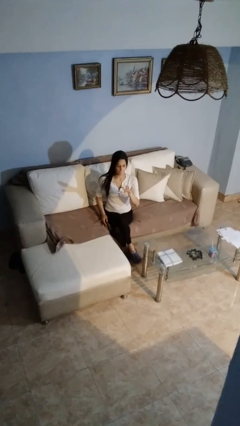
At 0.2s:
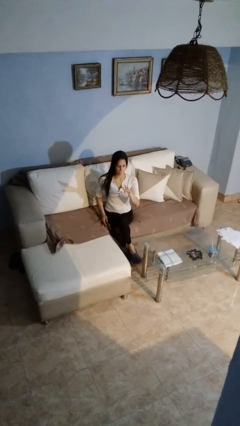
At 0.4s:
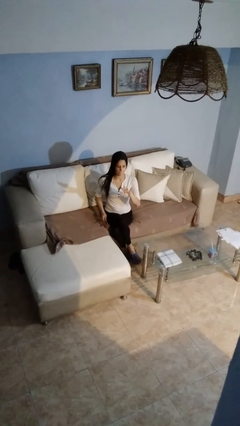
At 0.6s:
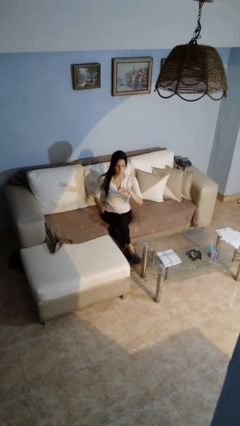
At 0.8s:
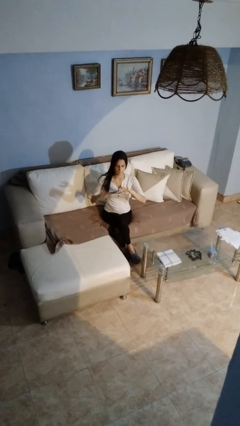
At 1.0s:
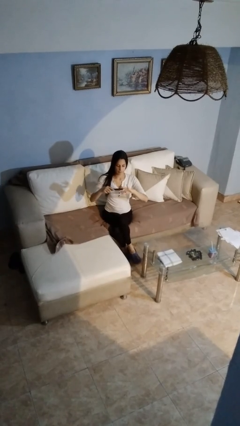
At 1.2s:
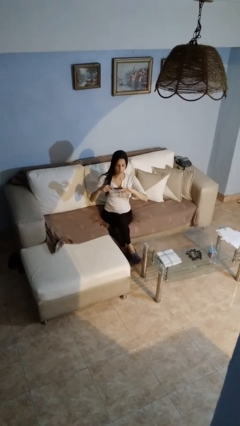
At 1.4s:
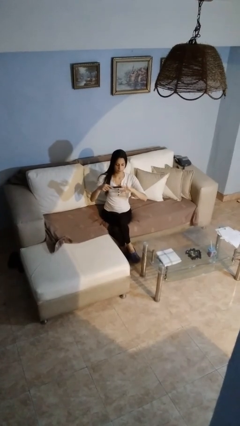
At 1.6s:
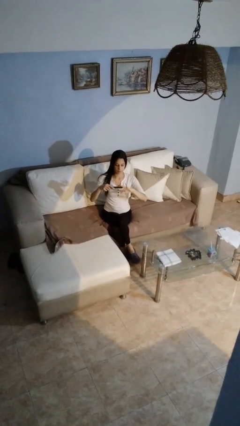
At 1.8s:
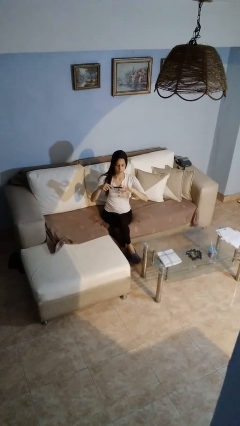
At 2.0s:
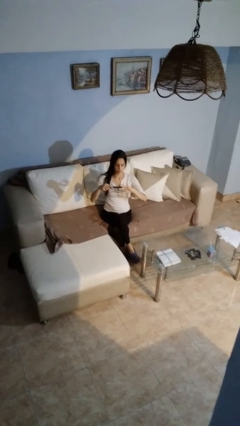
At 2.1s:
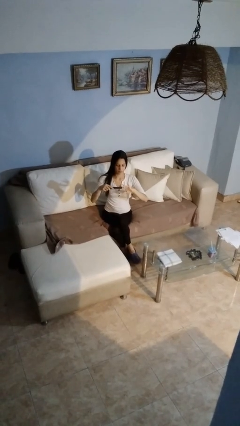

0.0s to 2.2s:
person files fingernails

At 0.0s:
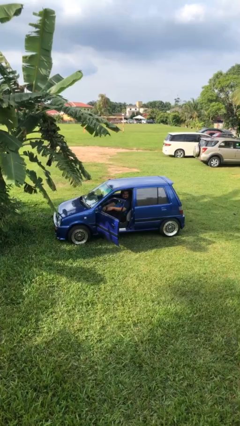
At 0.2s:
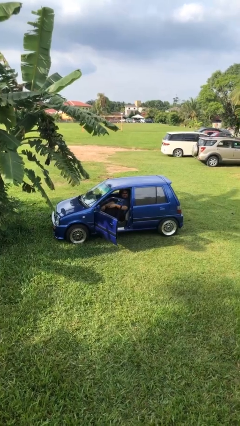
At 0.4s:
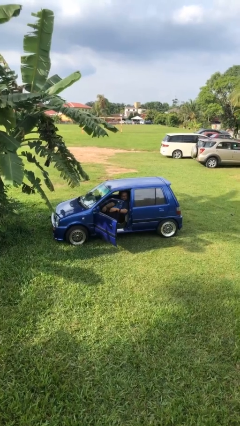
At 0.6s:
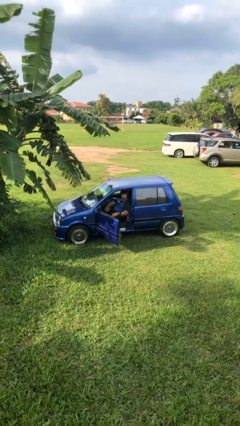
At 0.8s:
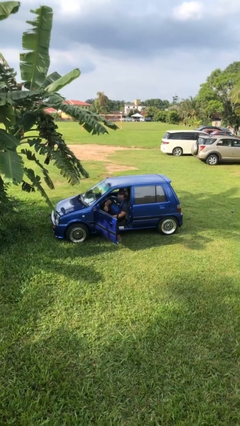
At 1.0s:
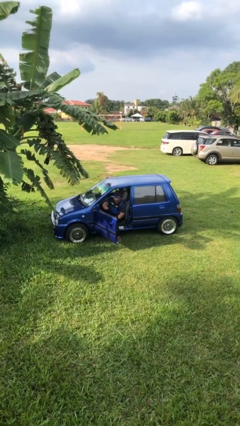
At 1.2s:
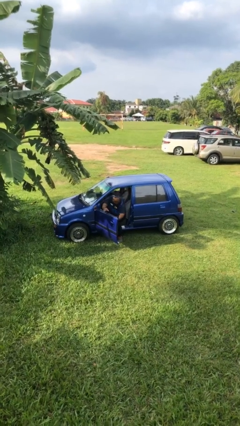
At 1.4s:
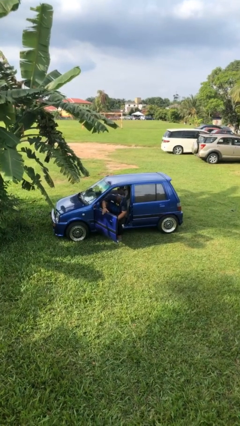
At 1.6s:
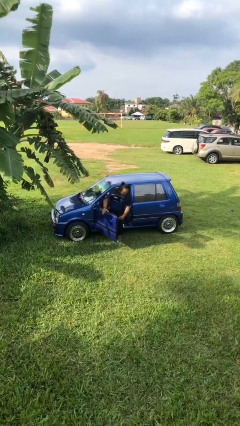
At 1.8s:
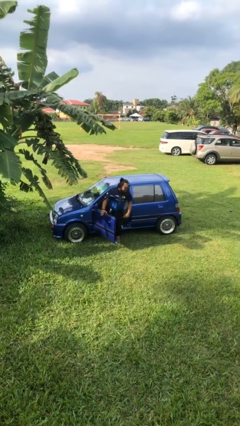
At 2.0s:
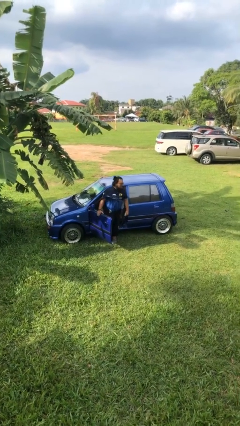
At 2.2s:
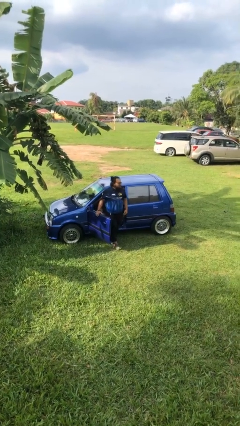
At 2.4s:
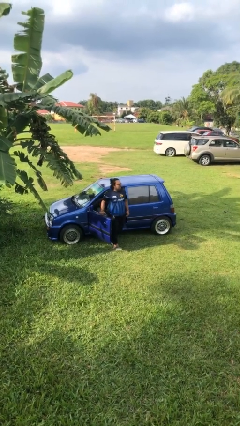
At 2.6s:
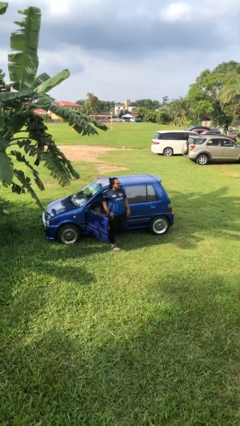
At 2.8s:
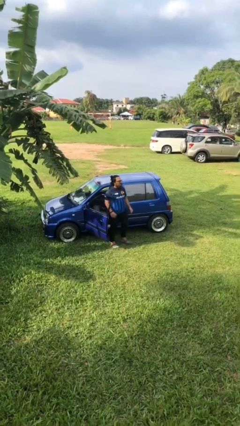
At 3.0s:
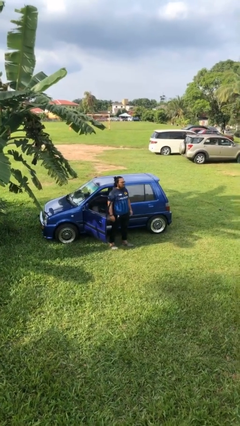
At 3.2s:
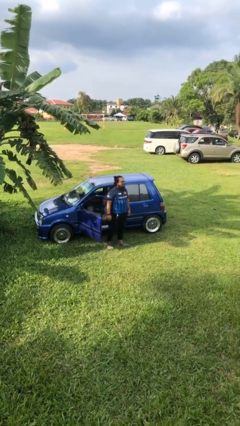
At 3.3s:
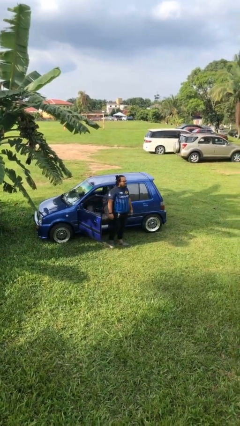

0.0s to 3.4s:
person exits car

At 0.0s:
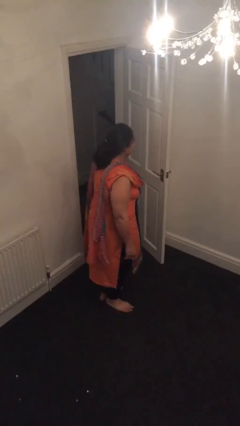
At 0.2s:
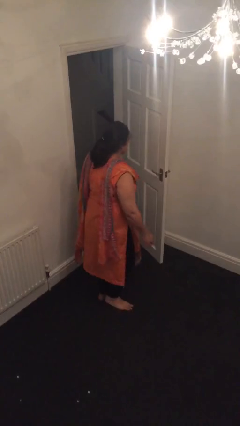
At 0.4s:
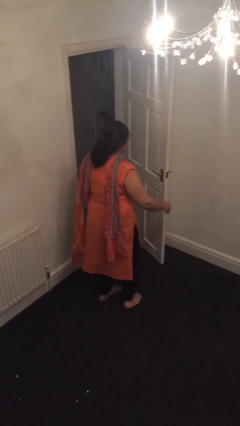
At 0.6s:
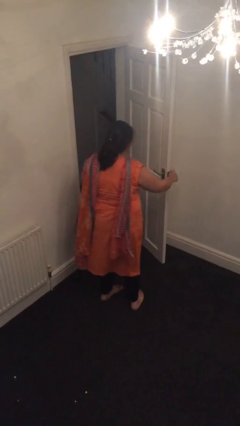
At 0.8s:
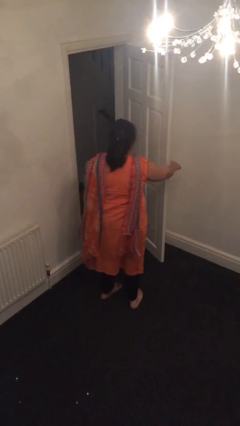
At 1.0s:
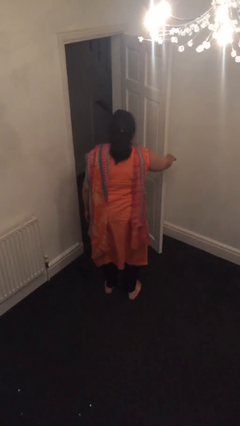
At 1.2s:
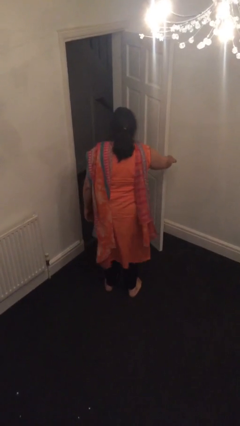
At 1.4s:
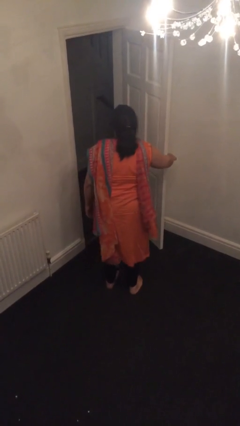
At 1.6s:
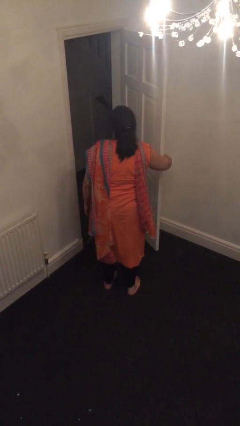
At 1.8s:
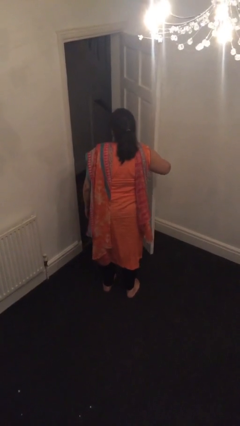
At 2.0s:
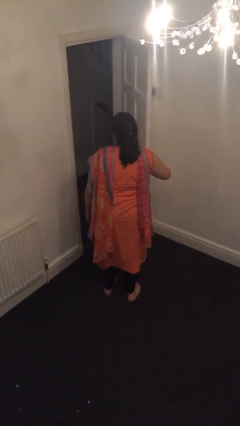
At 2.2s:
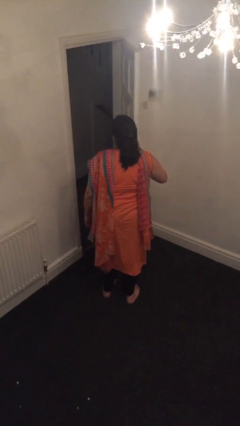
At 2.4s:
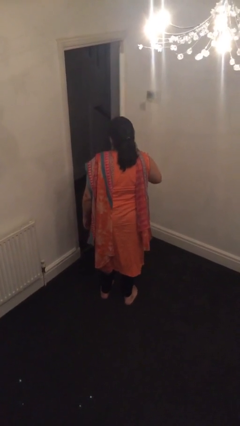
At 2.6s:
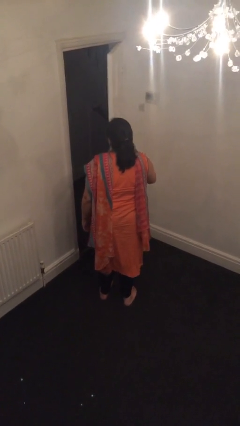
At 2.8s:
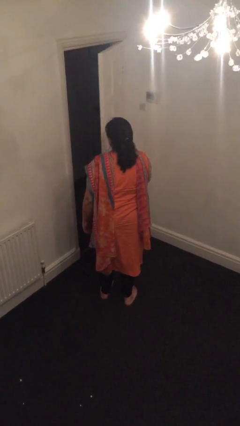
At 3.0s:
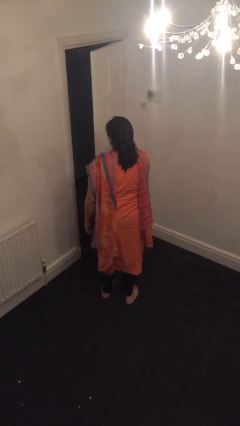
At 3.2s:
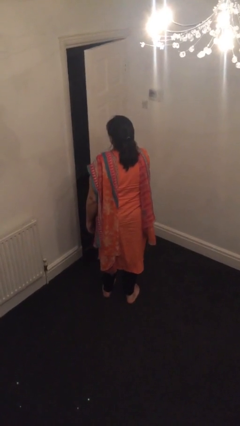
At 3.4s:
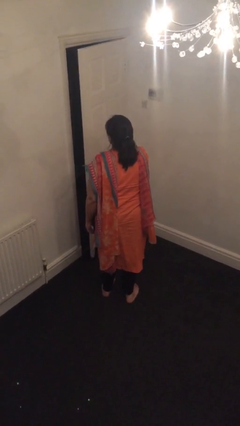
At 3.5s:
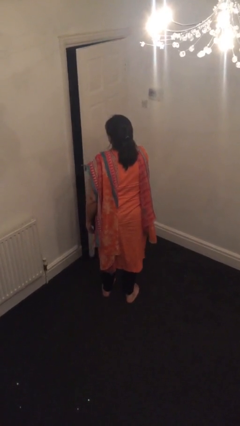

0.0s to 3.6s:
person closes facility door

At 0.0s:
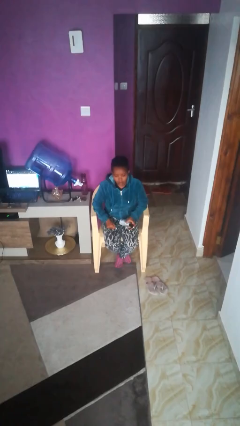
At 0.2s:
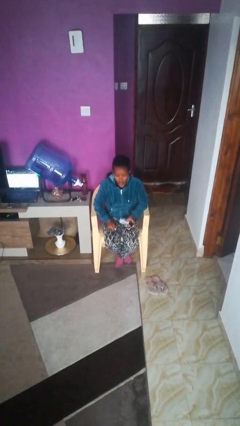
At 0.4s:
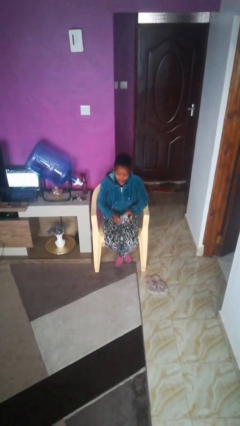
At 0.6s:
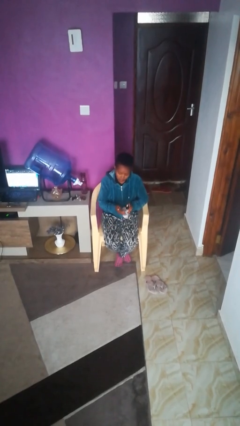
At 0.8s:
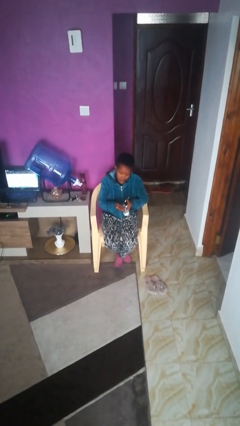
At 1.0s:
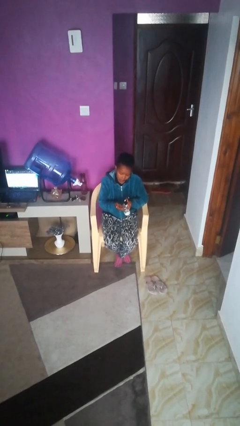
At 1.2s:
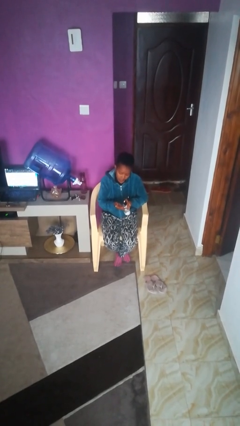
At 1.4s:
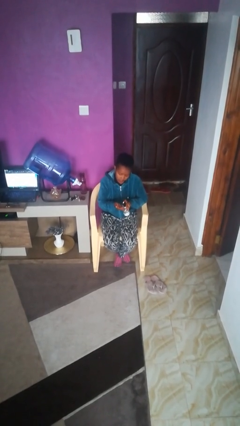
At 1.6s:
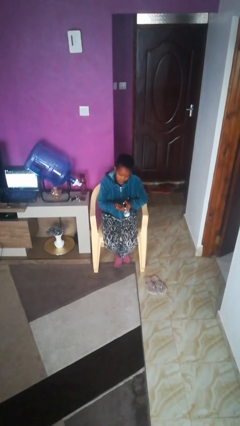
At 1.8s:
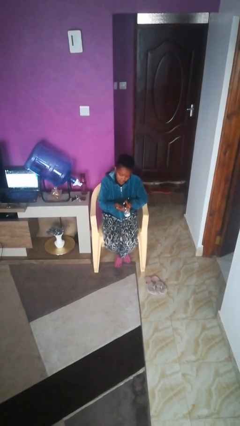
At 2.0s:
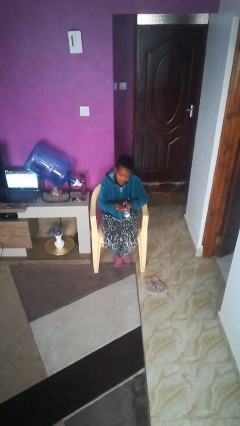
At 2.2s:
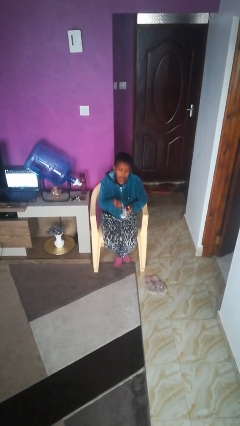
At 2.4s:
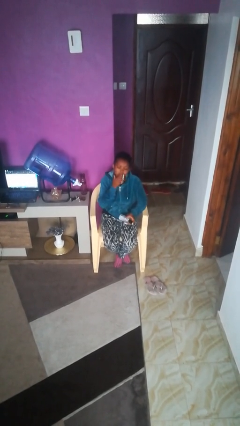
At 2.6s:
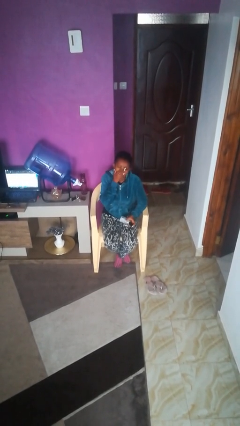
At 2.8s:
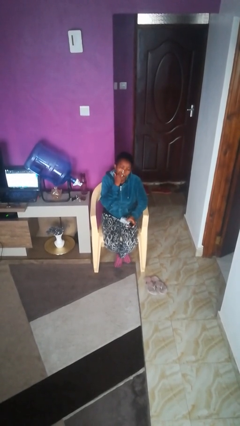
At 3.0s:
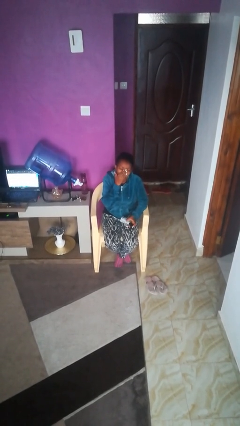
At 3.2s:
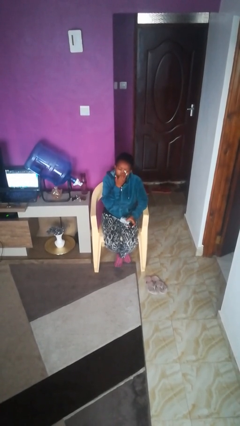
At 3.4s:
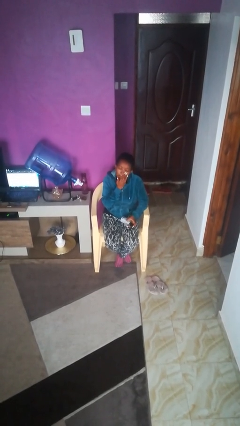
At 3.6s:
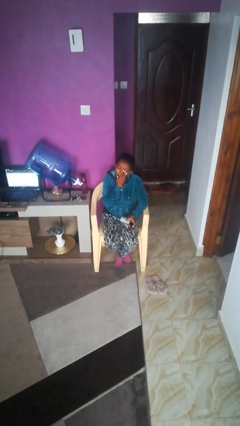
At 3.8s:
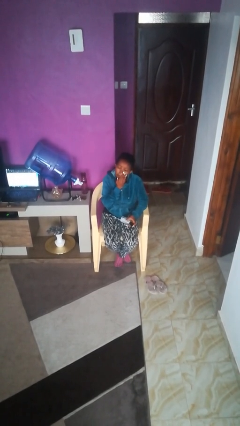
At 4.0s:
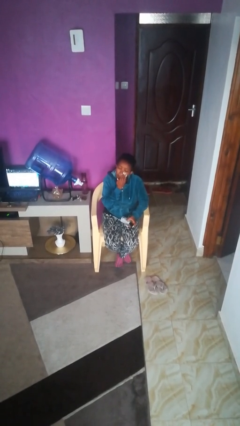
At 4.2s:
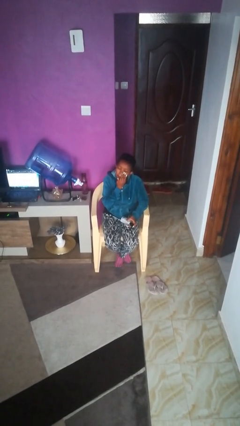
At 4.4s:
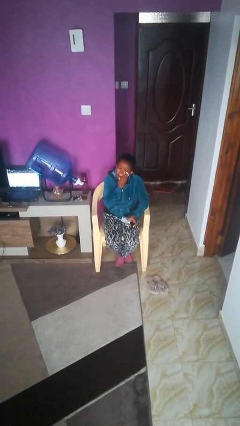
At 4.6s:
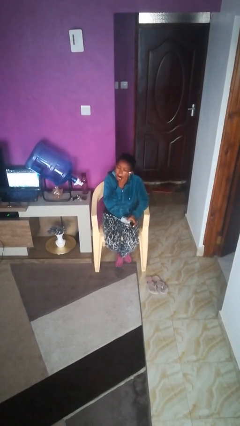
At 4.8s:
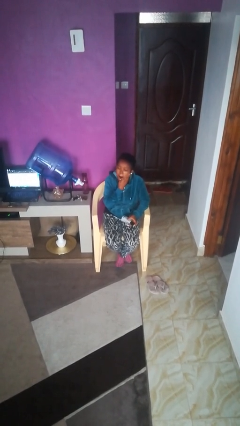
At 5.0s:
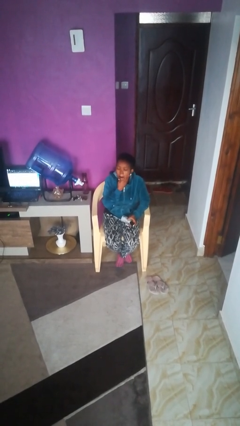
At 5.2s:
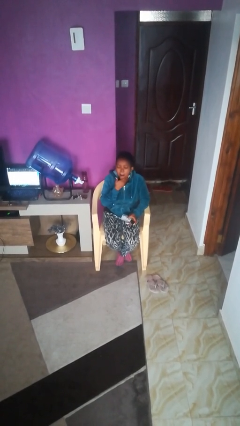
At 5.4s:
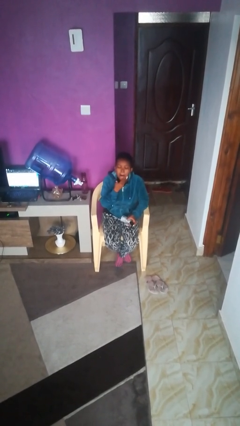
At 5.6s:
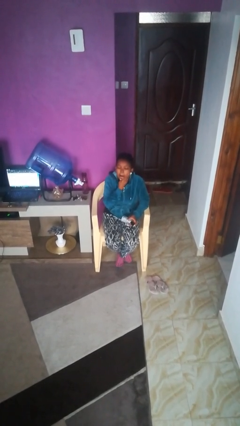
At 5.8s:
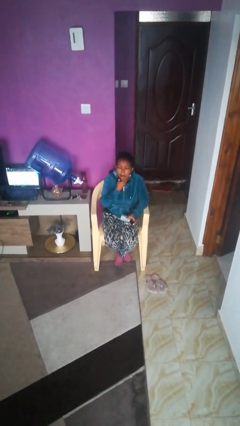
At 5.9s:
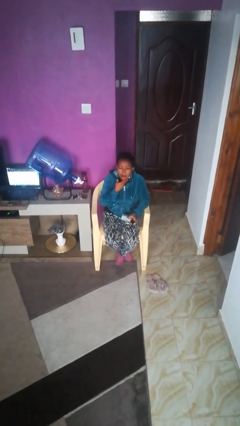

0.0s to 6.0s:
person applies facial moisturizer

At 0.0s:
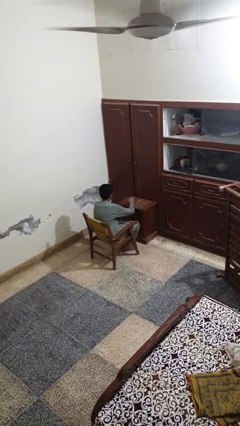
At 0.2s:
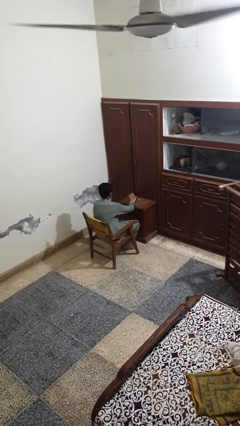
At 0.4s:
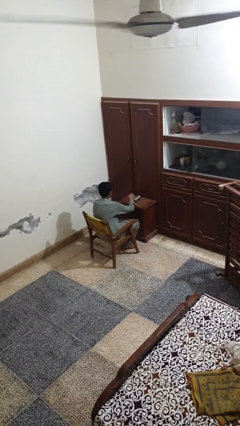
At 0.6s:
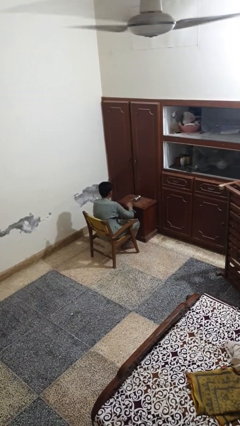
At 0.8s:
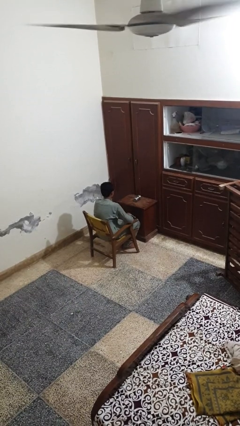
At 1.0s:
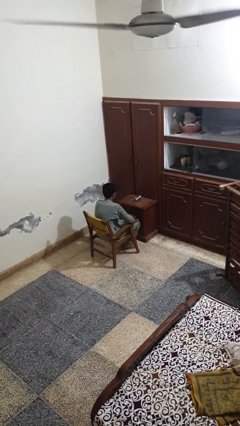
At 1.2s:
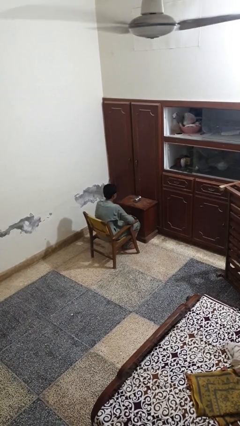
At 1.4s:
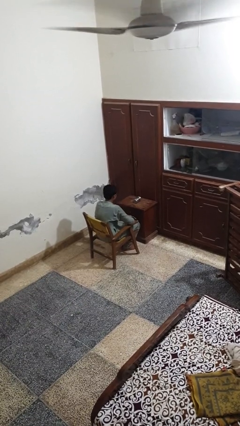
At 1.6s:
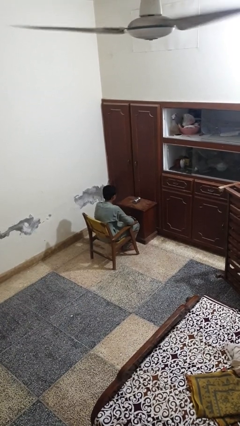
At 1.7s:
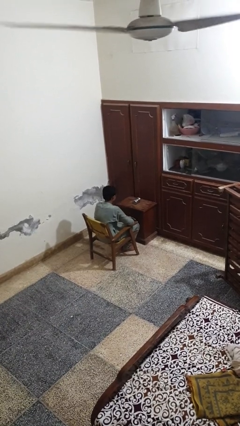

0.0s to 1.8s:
person knocks over glass

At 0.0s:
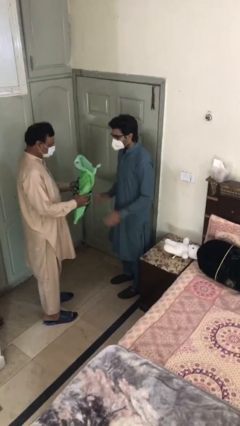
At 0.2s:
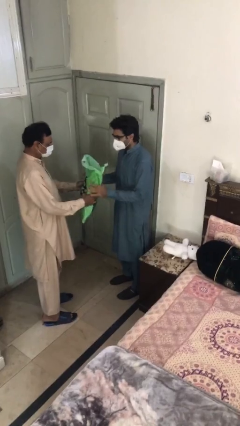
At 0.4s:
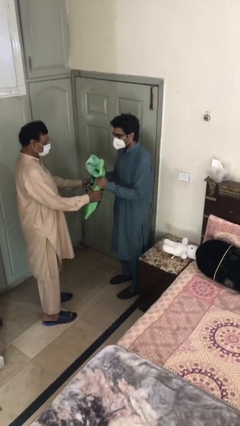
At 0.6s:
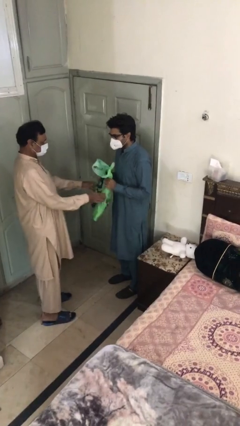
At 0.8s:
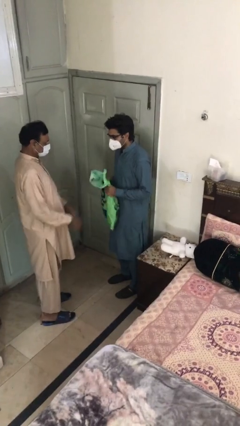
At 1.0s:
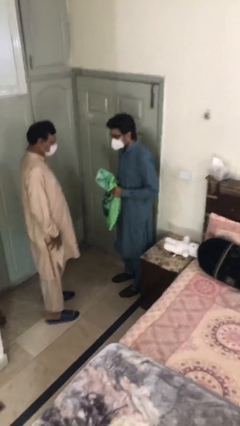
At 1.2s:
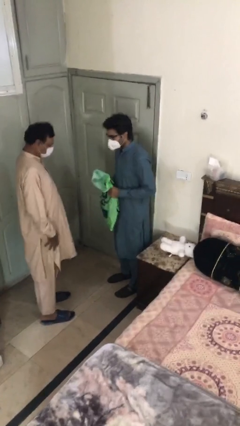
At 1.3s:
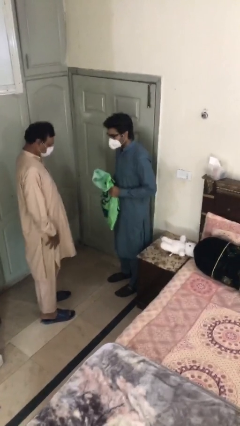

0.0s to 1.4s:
person transfers object to person
